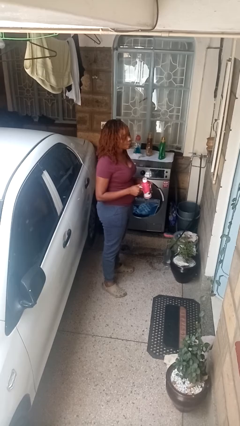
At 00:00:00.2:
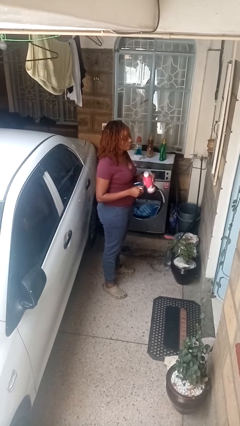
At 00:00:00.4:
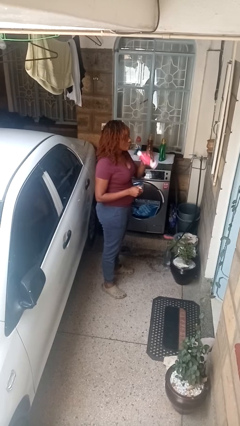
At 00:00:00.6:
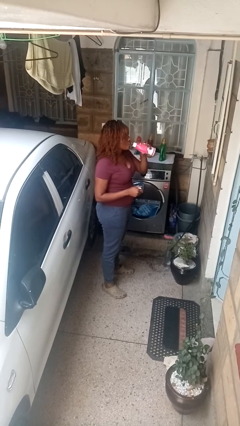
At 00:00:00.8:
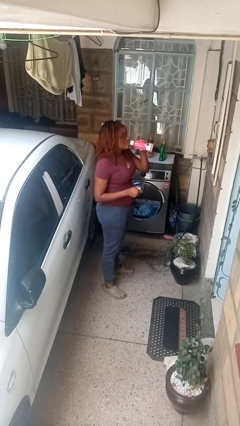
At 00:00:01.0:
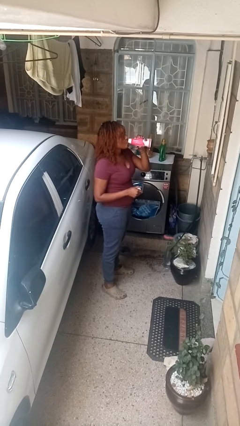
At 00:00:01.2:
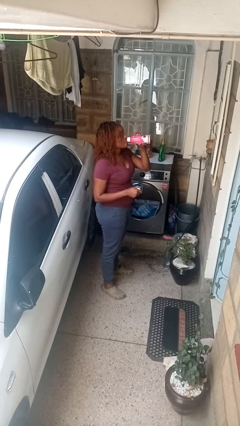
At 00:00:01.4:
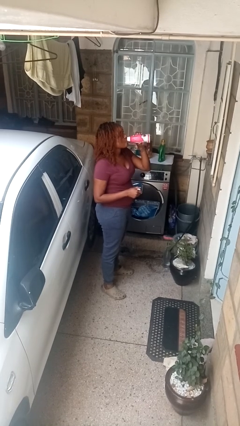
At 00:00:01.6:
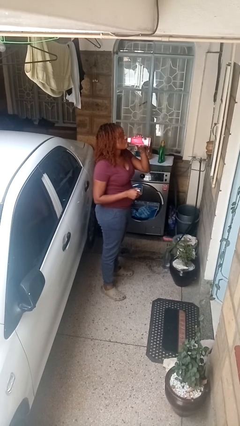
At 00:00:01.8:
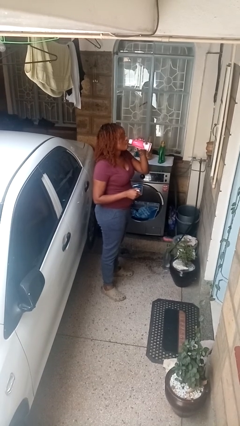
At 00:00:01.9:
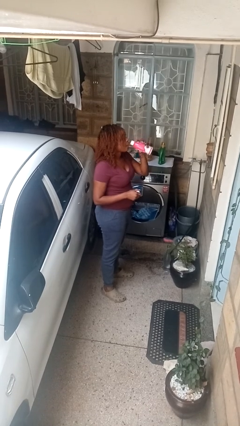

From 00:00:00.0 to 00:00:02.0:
person drinks from beverage can

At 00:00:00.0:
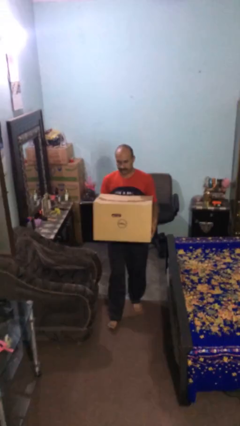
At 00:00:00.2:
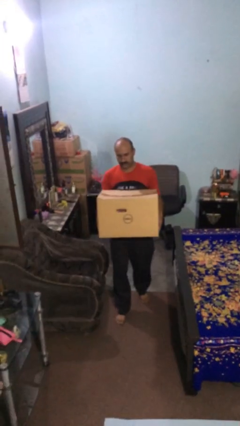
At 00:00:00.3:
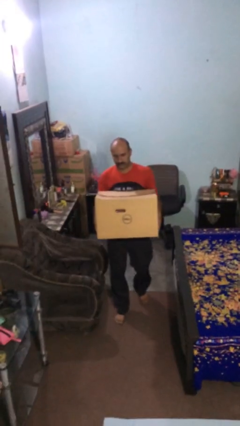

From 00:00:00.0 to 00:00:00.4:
person puts down object on floor

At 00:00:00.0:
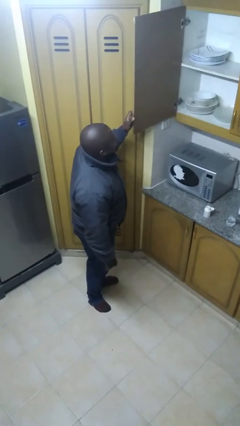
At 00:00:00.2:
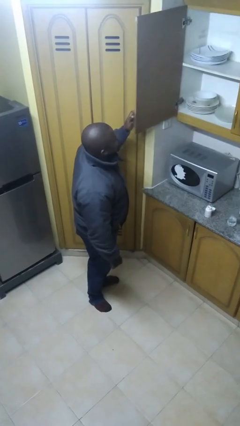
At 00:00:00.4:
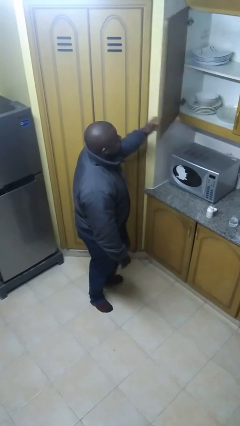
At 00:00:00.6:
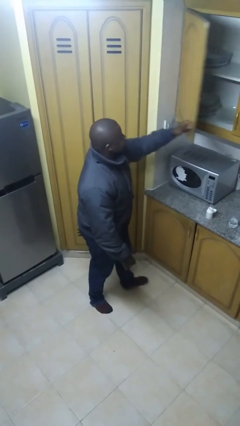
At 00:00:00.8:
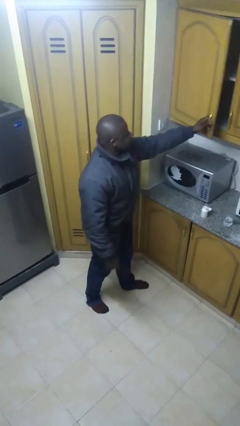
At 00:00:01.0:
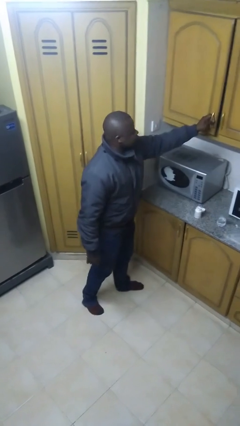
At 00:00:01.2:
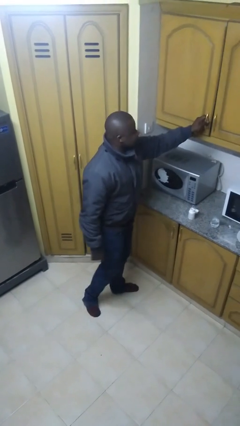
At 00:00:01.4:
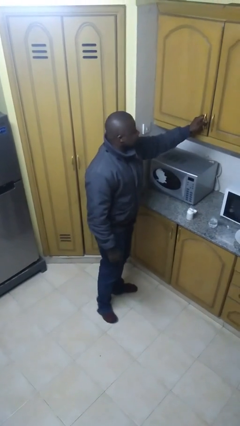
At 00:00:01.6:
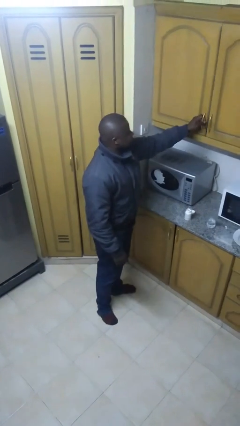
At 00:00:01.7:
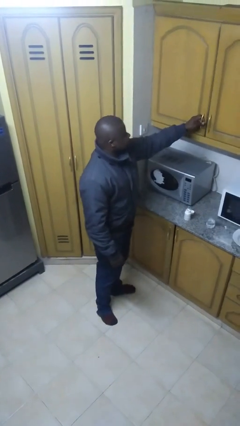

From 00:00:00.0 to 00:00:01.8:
person closes cabinet

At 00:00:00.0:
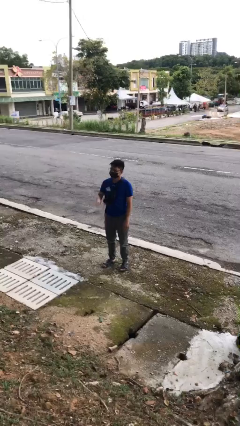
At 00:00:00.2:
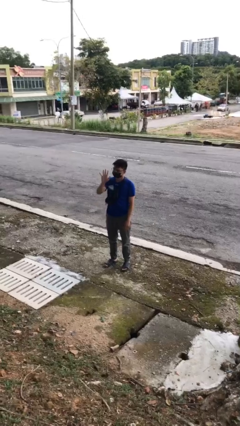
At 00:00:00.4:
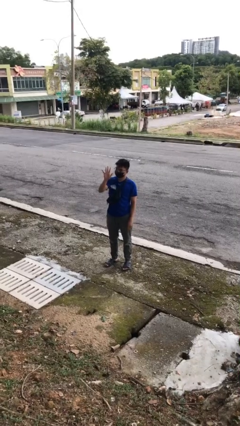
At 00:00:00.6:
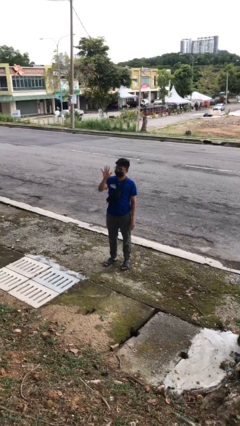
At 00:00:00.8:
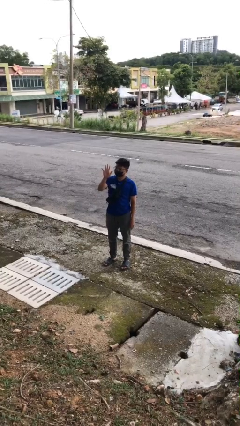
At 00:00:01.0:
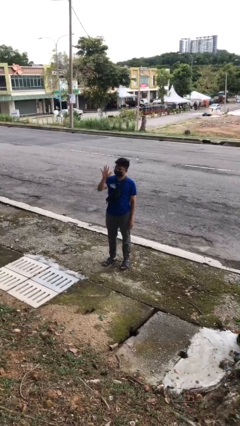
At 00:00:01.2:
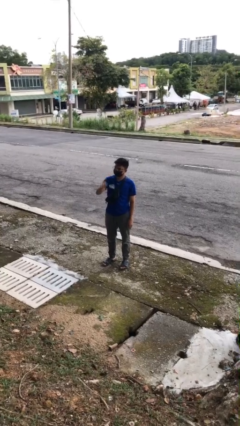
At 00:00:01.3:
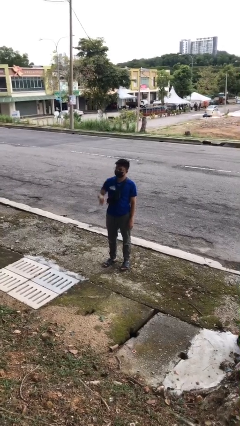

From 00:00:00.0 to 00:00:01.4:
person gestures stop

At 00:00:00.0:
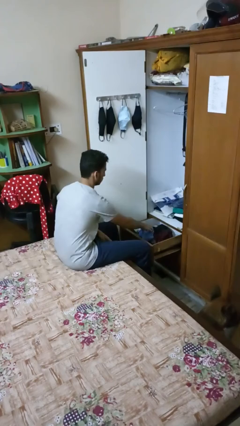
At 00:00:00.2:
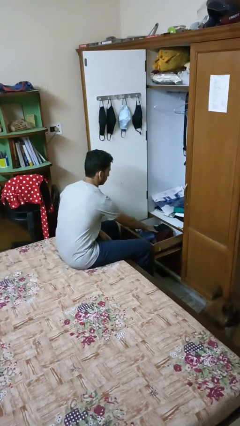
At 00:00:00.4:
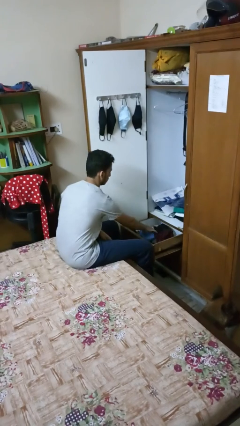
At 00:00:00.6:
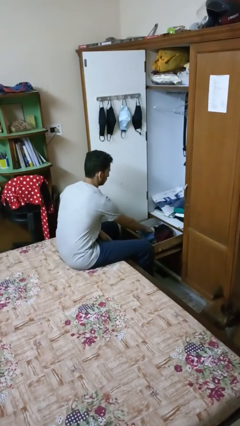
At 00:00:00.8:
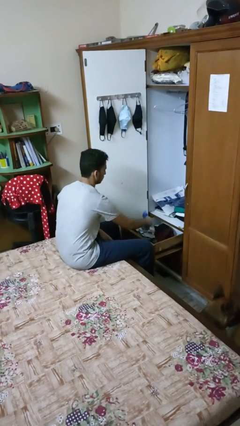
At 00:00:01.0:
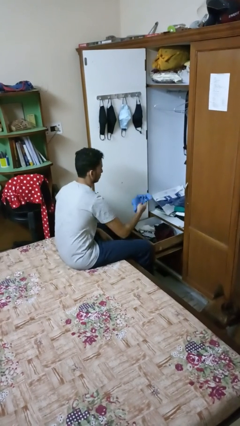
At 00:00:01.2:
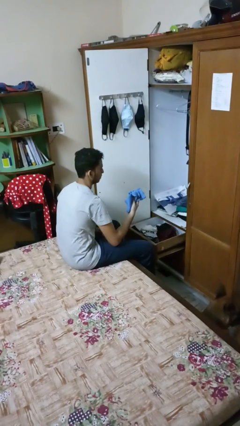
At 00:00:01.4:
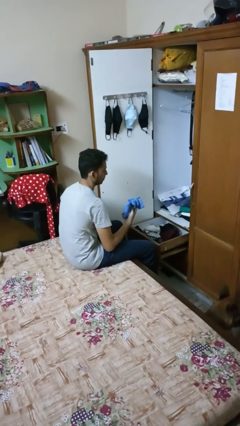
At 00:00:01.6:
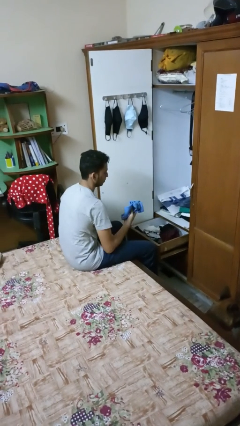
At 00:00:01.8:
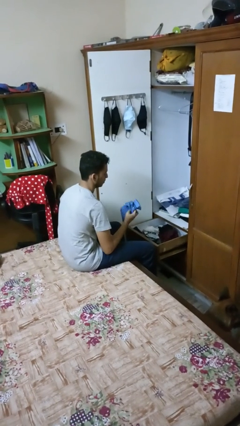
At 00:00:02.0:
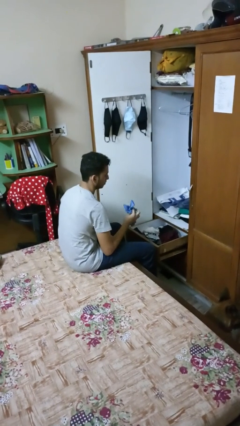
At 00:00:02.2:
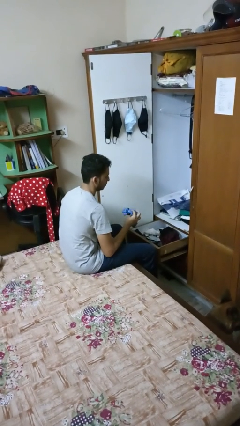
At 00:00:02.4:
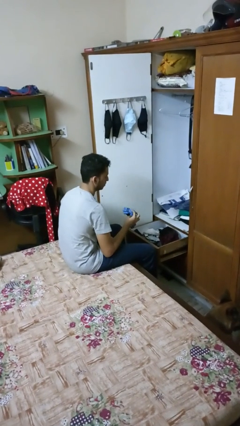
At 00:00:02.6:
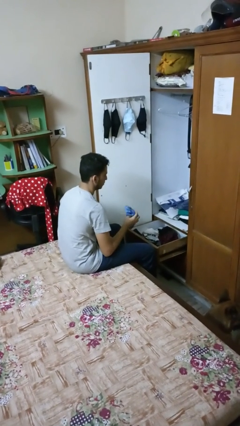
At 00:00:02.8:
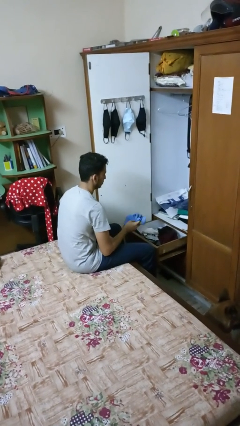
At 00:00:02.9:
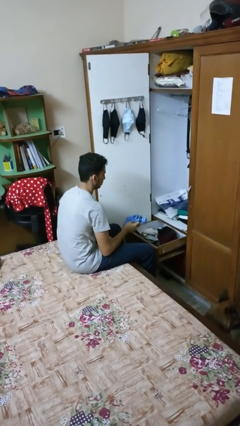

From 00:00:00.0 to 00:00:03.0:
person takes clothes from dresser

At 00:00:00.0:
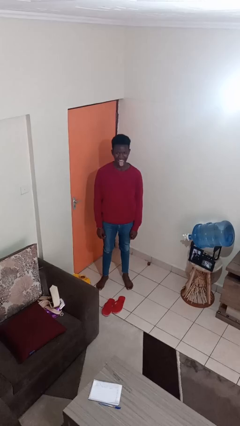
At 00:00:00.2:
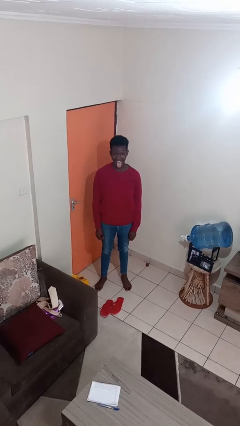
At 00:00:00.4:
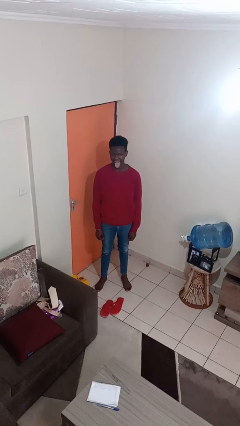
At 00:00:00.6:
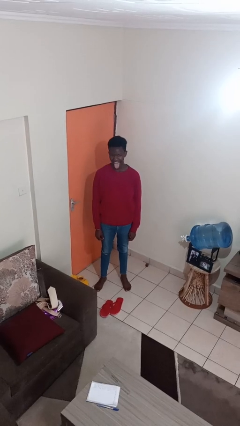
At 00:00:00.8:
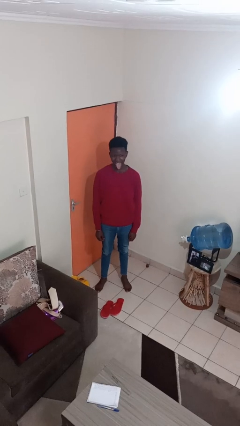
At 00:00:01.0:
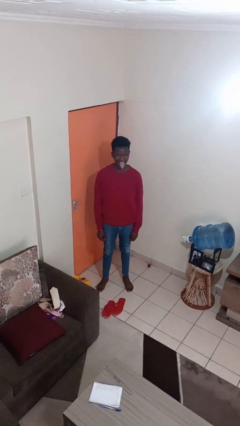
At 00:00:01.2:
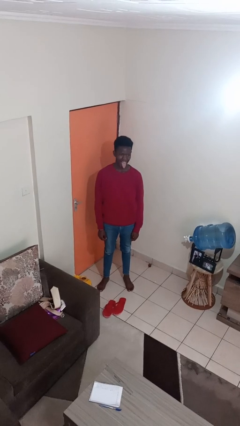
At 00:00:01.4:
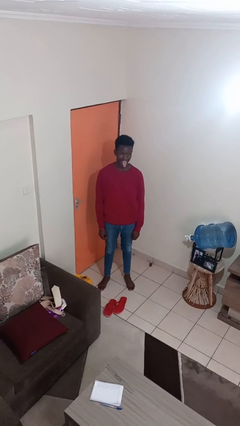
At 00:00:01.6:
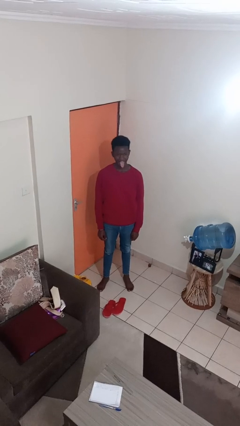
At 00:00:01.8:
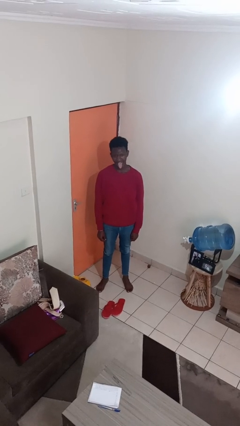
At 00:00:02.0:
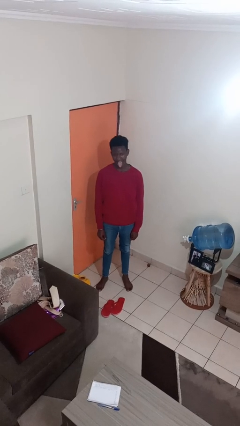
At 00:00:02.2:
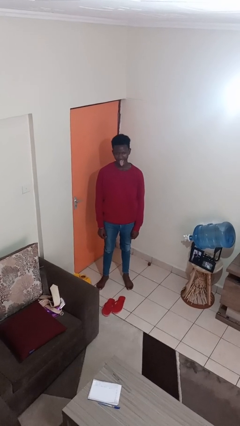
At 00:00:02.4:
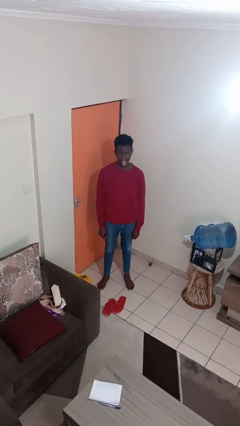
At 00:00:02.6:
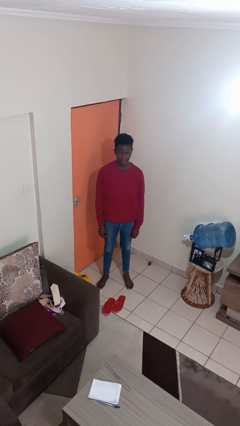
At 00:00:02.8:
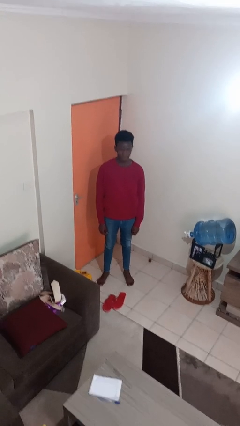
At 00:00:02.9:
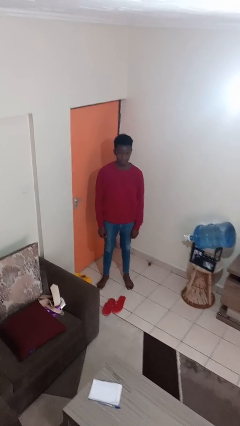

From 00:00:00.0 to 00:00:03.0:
person sticks out tongue

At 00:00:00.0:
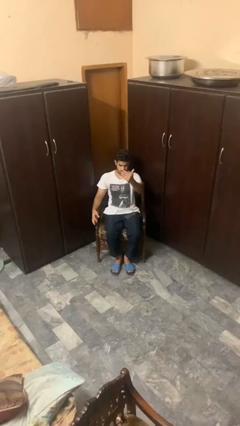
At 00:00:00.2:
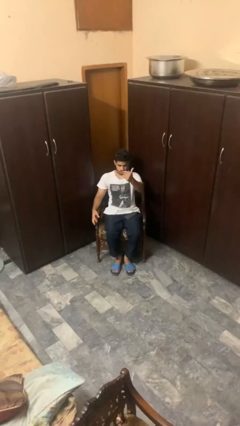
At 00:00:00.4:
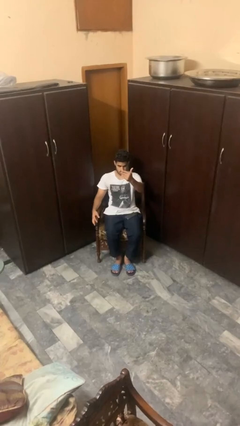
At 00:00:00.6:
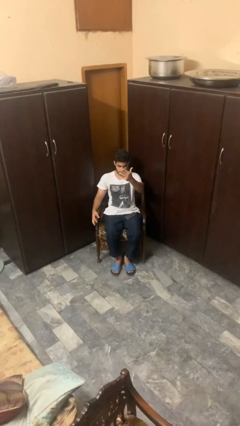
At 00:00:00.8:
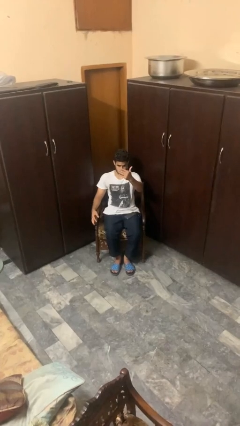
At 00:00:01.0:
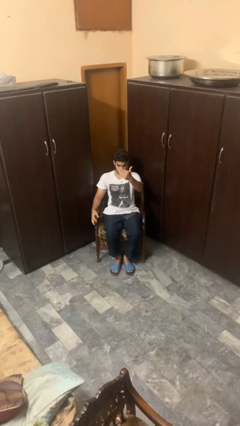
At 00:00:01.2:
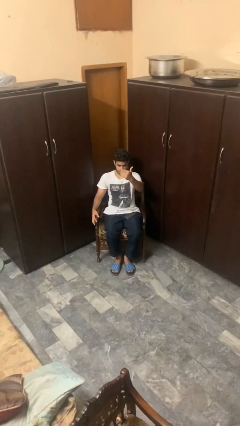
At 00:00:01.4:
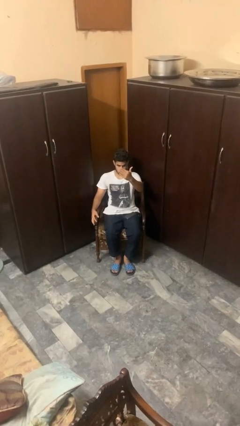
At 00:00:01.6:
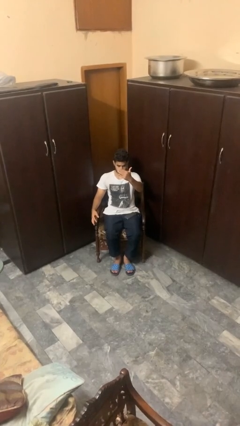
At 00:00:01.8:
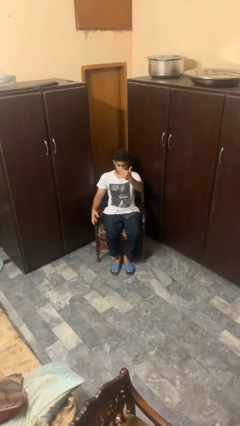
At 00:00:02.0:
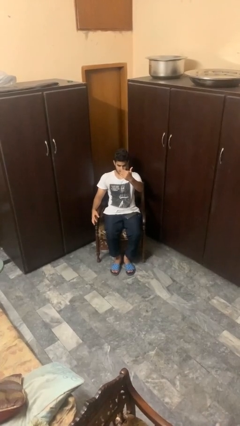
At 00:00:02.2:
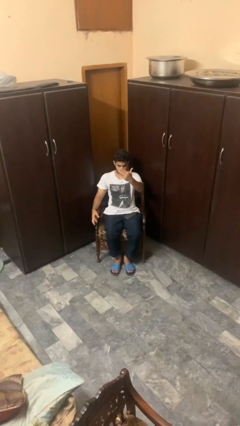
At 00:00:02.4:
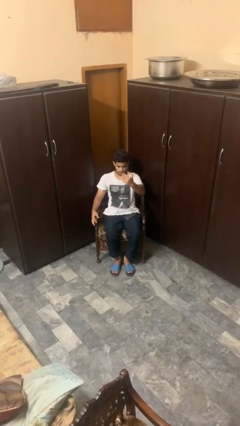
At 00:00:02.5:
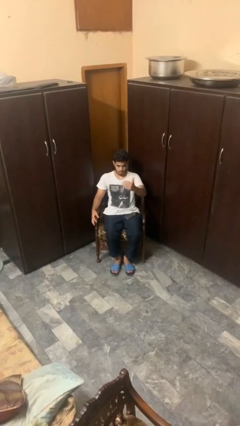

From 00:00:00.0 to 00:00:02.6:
person gestures come here

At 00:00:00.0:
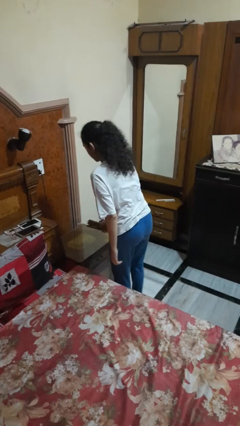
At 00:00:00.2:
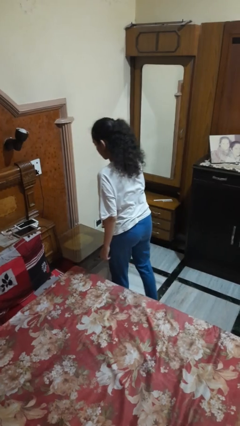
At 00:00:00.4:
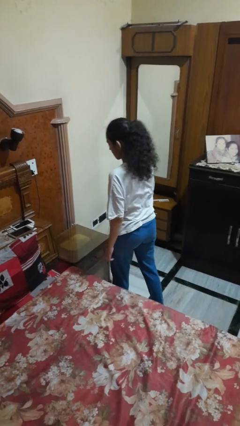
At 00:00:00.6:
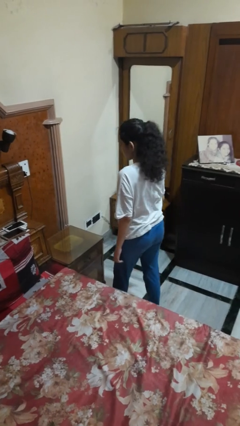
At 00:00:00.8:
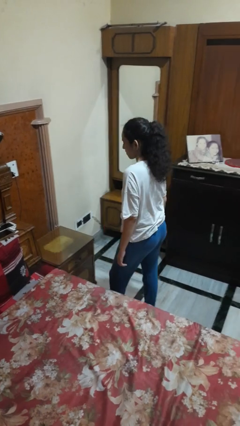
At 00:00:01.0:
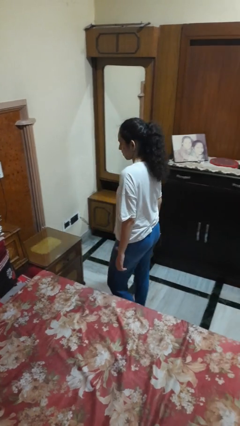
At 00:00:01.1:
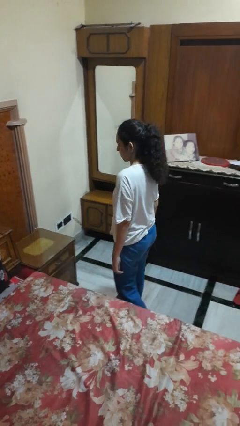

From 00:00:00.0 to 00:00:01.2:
person picks up object from table

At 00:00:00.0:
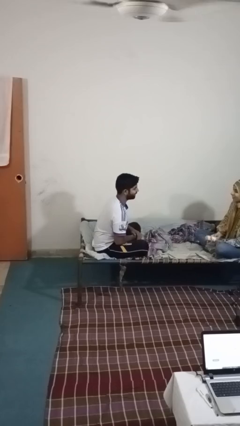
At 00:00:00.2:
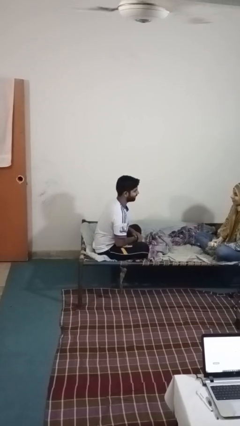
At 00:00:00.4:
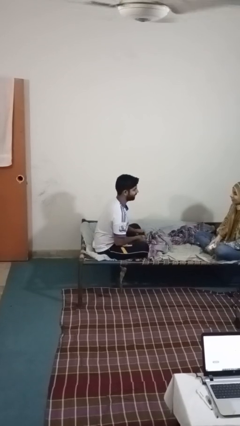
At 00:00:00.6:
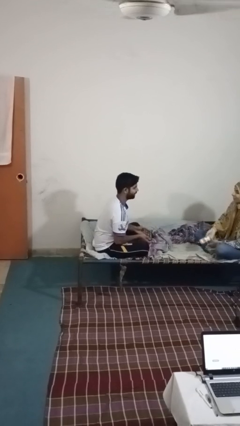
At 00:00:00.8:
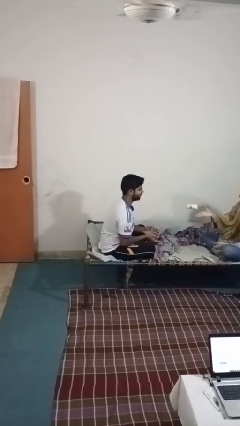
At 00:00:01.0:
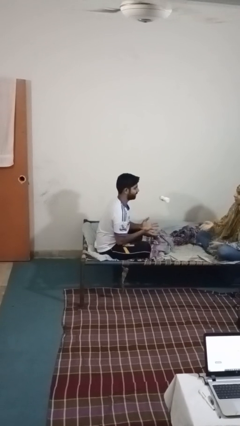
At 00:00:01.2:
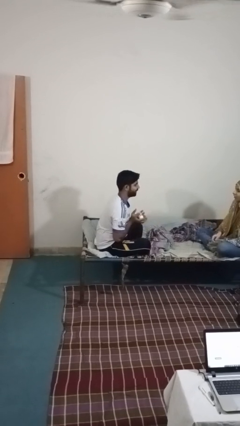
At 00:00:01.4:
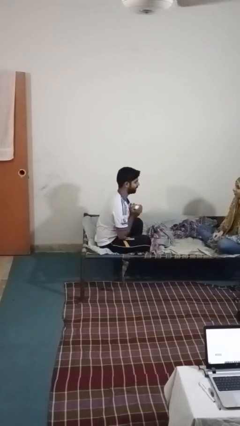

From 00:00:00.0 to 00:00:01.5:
person catches object from person
